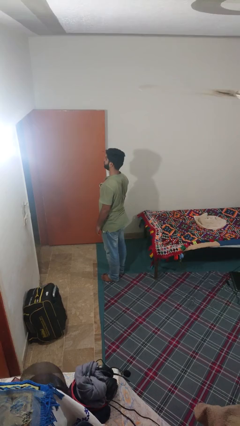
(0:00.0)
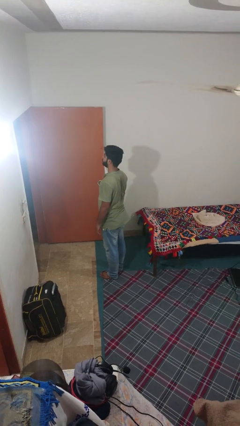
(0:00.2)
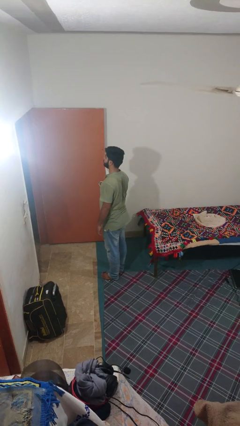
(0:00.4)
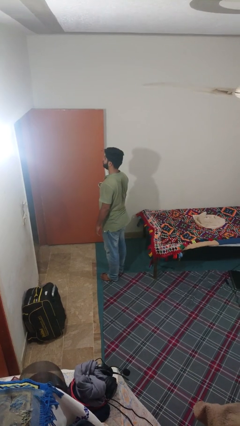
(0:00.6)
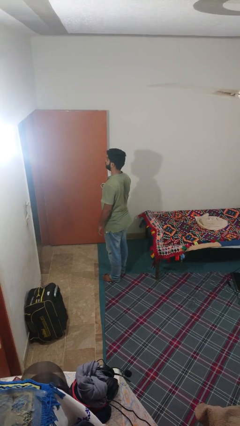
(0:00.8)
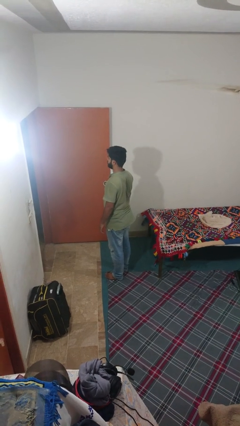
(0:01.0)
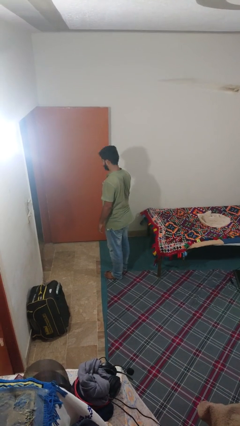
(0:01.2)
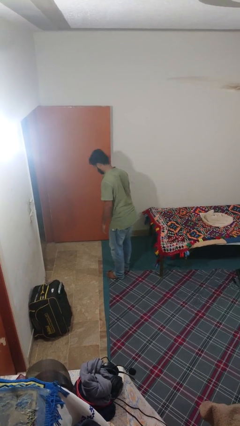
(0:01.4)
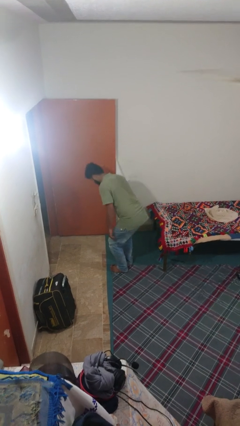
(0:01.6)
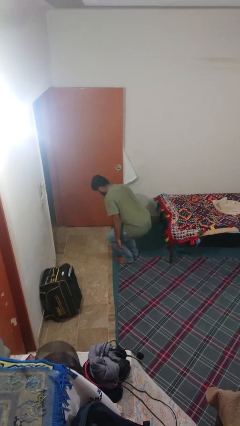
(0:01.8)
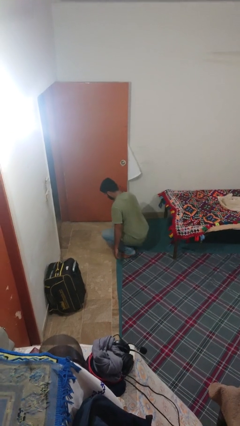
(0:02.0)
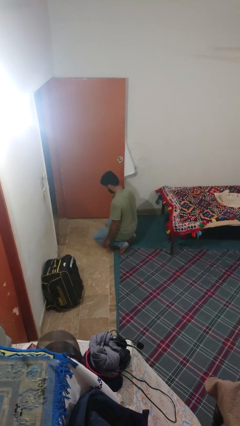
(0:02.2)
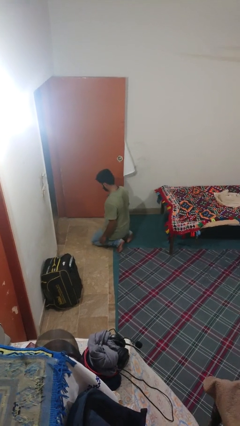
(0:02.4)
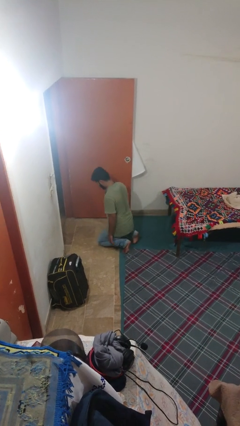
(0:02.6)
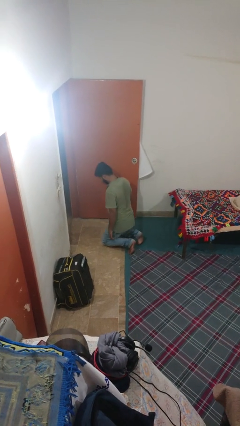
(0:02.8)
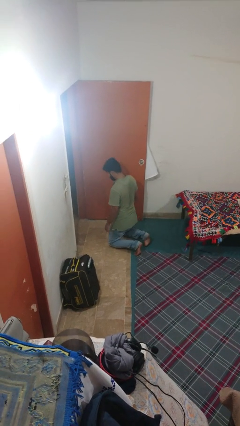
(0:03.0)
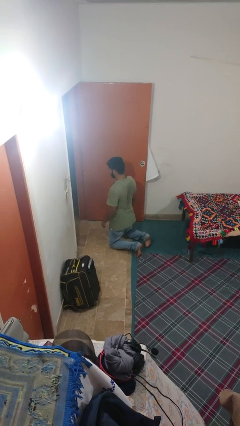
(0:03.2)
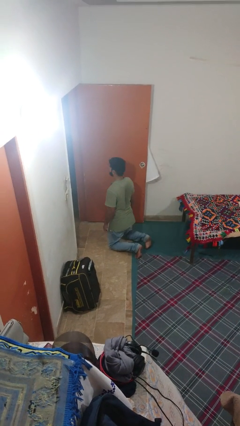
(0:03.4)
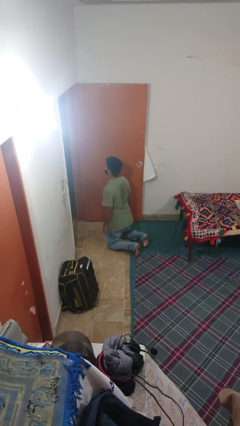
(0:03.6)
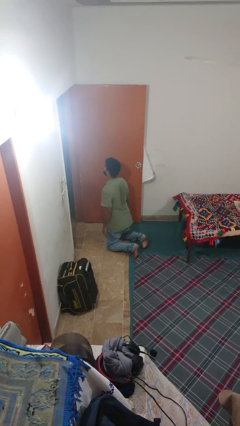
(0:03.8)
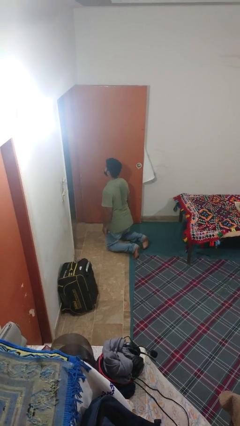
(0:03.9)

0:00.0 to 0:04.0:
person kneels

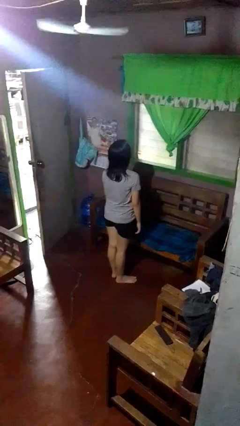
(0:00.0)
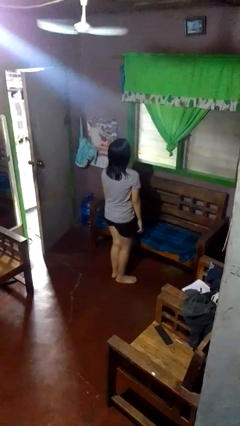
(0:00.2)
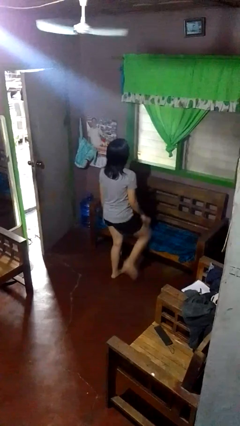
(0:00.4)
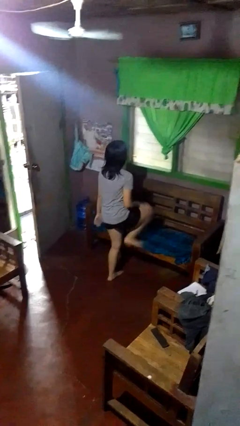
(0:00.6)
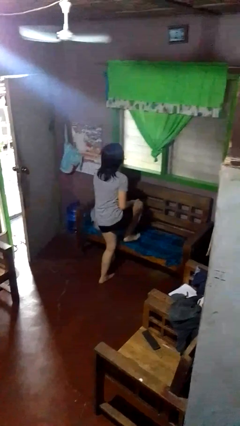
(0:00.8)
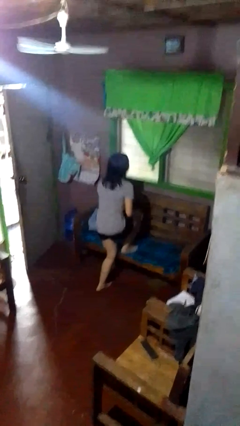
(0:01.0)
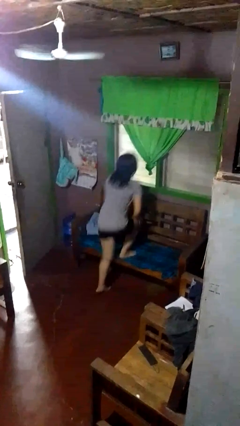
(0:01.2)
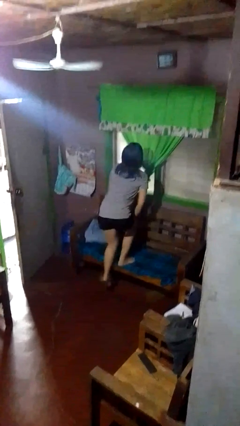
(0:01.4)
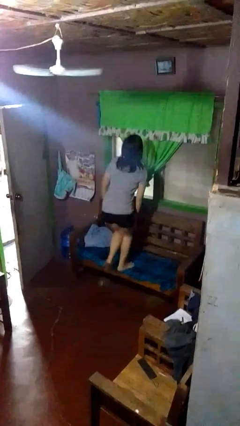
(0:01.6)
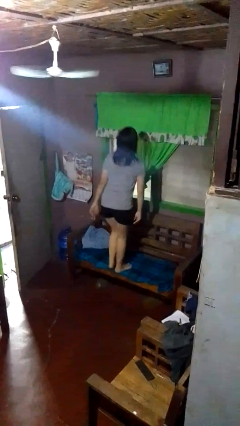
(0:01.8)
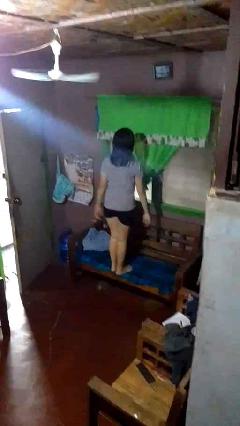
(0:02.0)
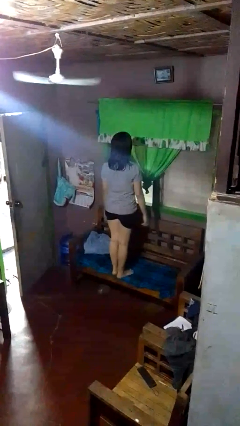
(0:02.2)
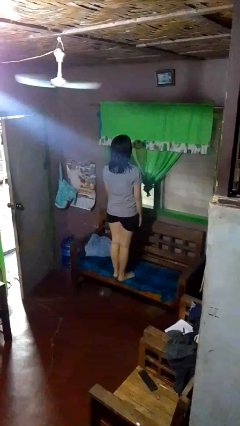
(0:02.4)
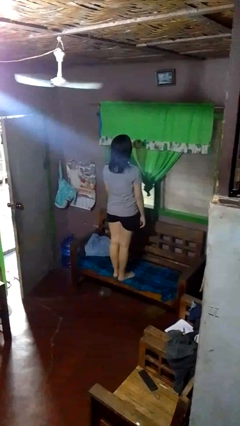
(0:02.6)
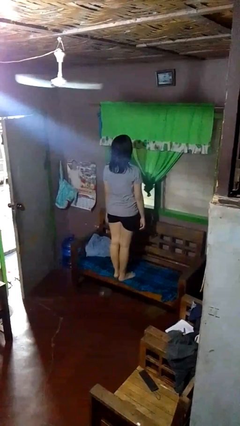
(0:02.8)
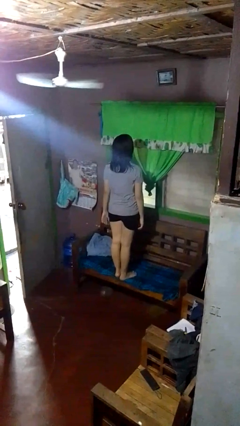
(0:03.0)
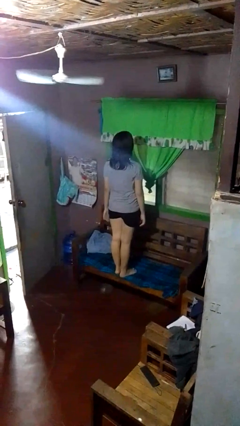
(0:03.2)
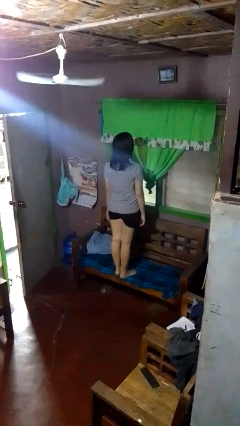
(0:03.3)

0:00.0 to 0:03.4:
person climbs on couch

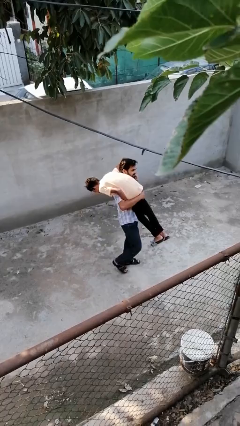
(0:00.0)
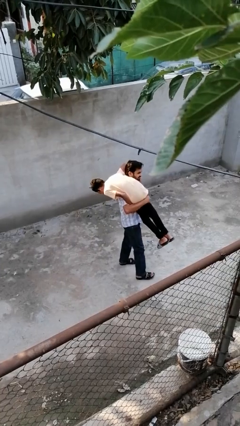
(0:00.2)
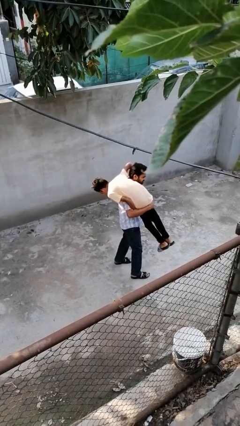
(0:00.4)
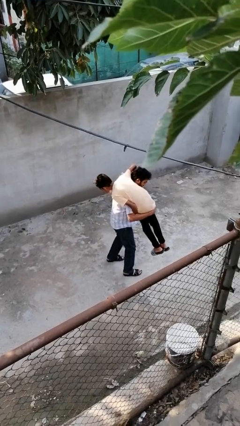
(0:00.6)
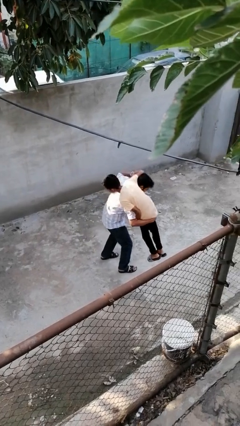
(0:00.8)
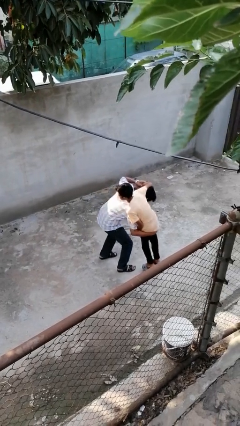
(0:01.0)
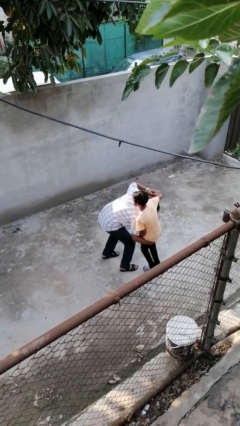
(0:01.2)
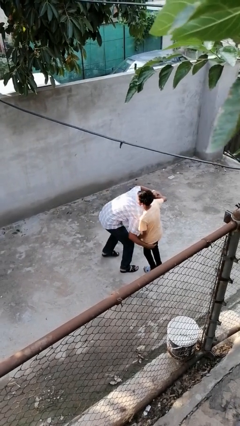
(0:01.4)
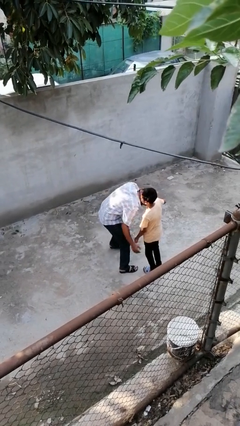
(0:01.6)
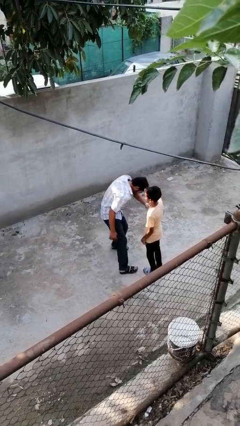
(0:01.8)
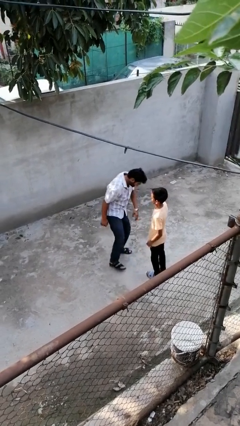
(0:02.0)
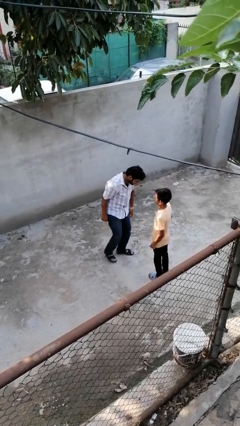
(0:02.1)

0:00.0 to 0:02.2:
person puts down person

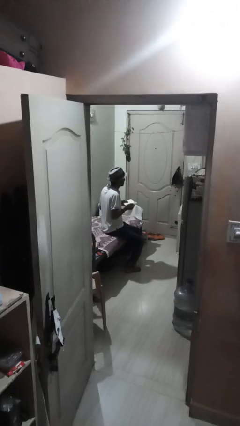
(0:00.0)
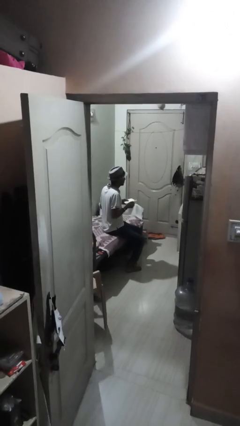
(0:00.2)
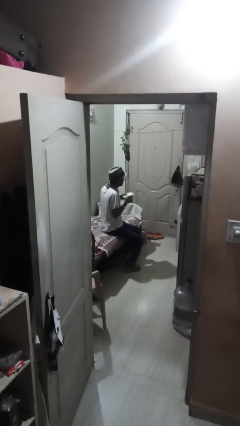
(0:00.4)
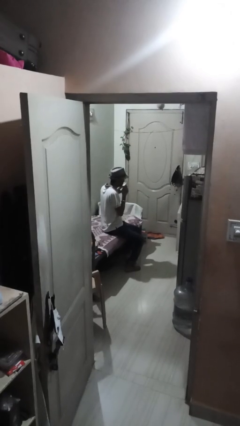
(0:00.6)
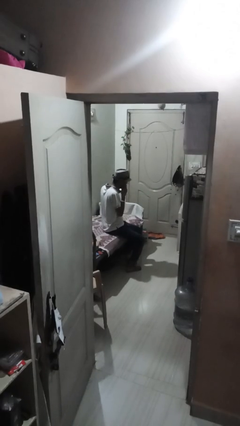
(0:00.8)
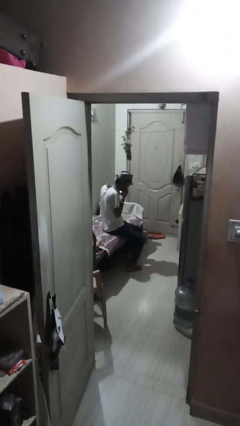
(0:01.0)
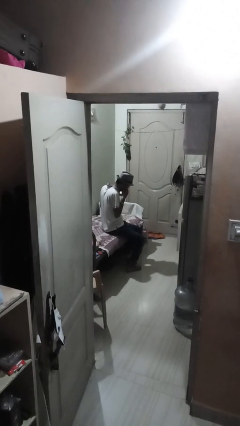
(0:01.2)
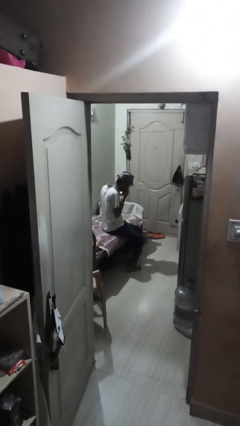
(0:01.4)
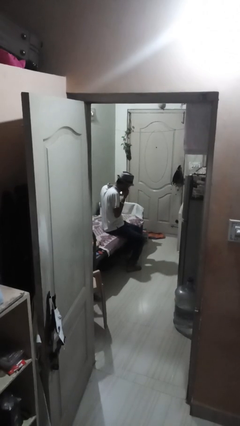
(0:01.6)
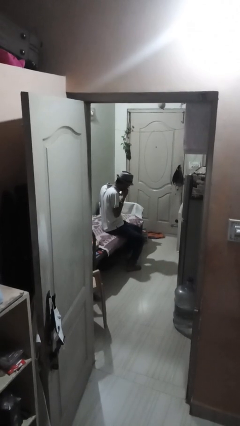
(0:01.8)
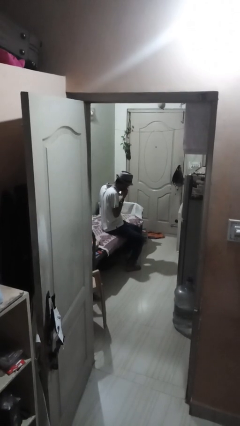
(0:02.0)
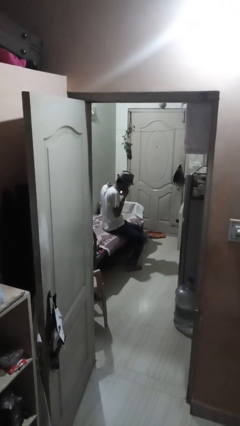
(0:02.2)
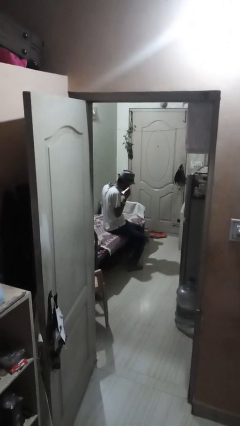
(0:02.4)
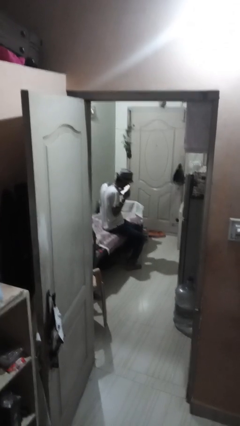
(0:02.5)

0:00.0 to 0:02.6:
person blows nose

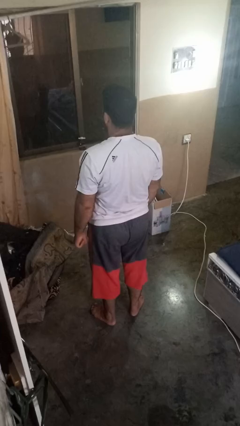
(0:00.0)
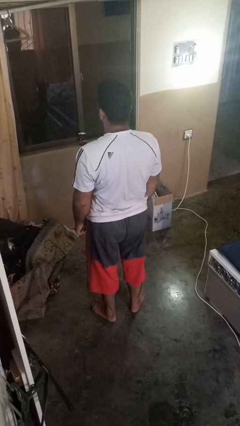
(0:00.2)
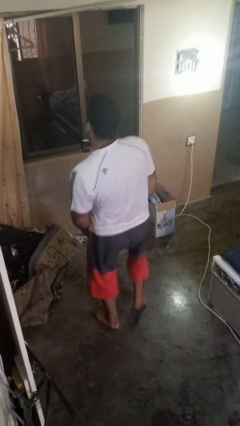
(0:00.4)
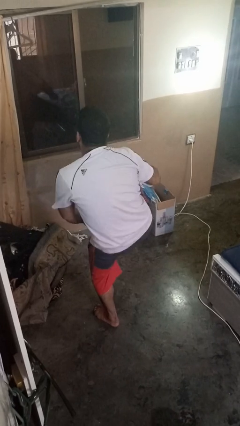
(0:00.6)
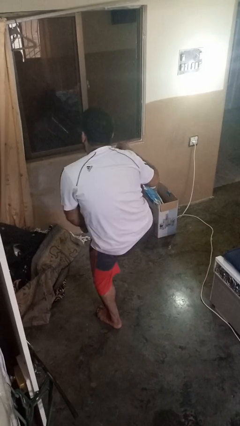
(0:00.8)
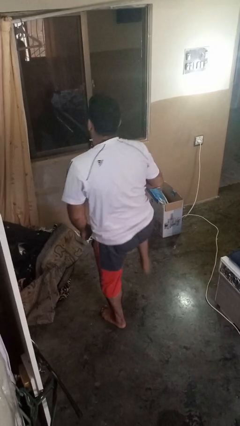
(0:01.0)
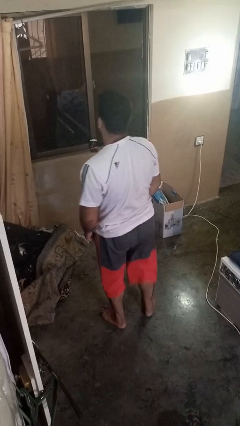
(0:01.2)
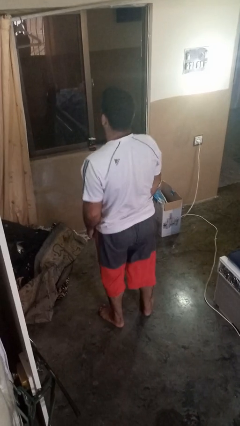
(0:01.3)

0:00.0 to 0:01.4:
person karate kicks

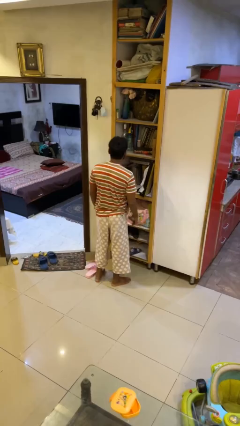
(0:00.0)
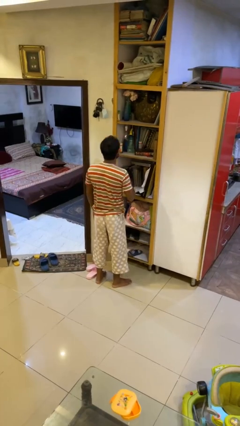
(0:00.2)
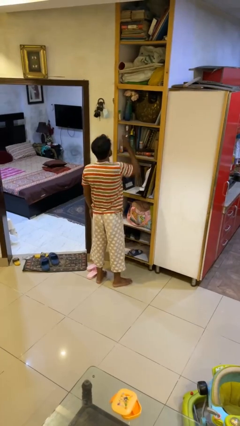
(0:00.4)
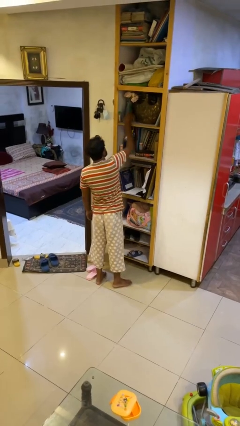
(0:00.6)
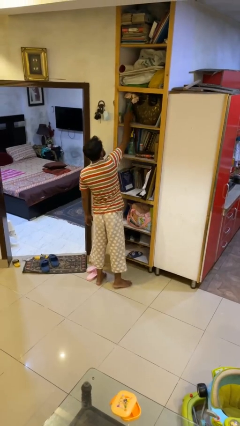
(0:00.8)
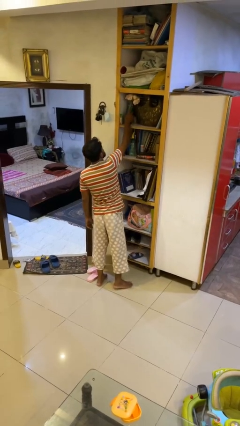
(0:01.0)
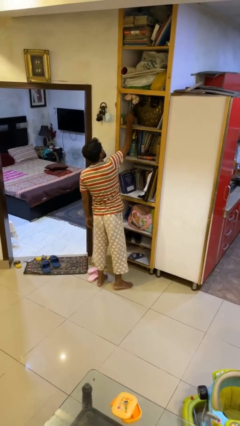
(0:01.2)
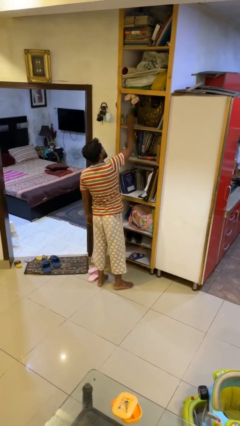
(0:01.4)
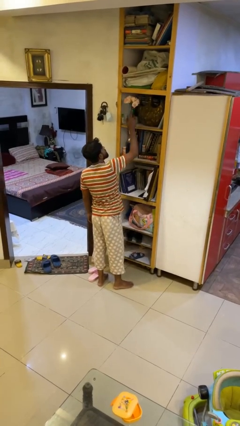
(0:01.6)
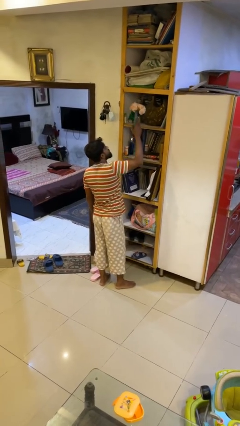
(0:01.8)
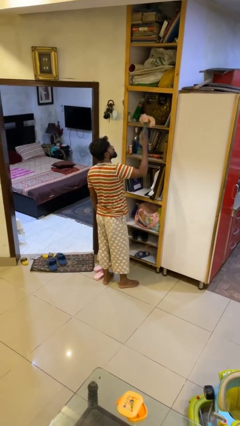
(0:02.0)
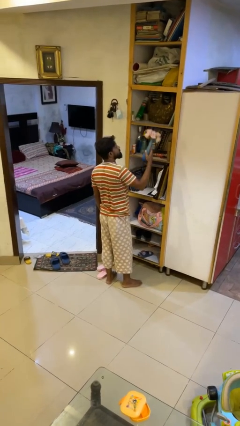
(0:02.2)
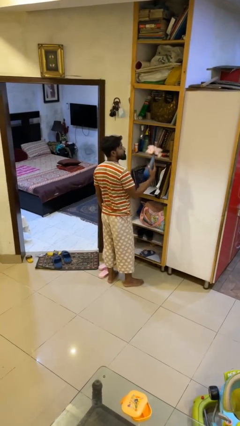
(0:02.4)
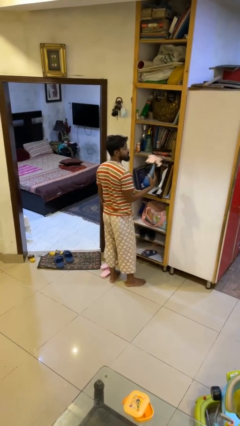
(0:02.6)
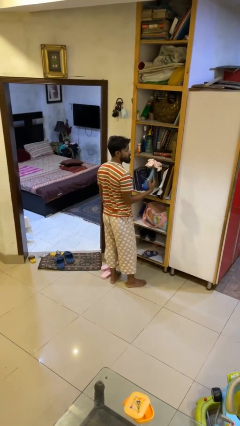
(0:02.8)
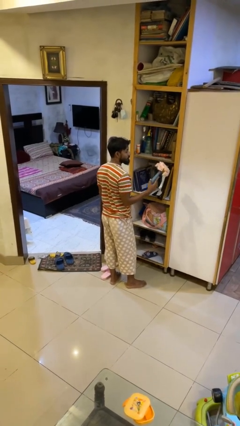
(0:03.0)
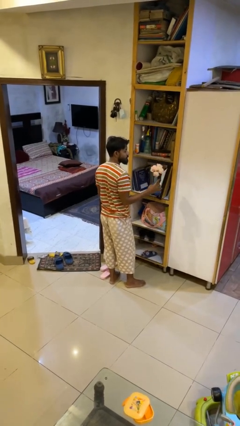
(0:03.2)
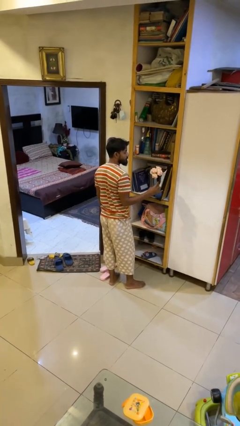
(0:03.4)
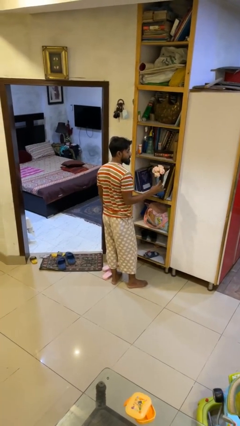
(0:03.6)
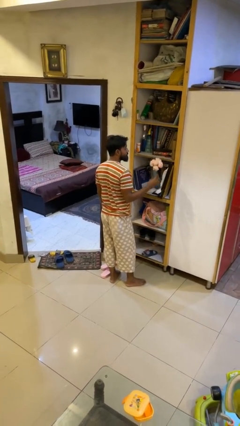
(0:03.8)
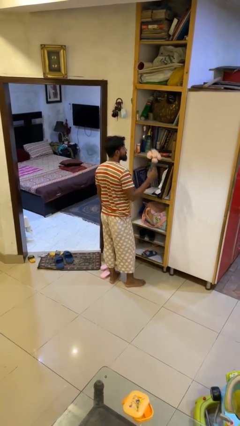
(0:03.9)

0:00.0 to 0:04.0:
person picks up object from shelf
